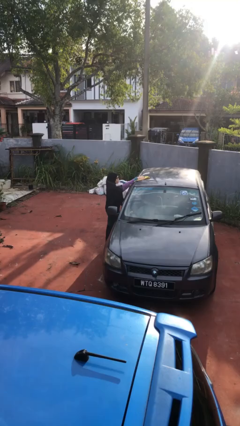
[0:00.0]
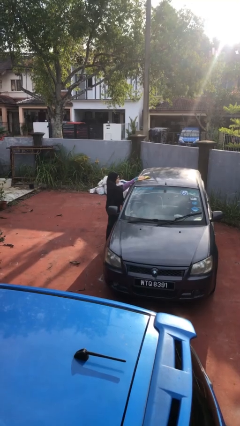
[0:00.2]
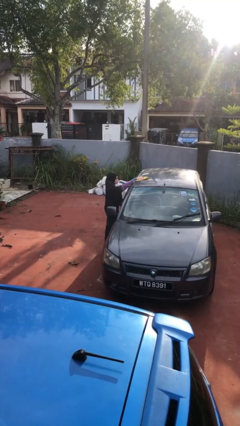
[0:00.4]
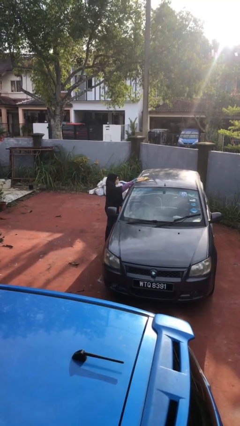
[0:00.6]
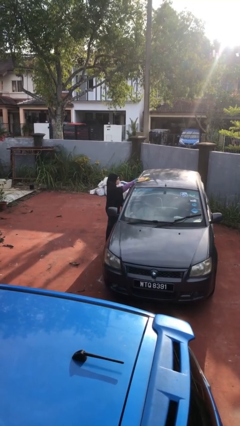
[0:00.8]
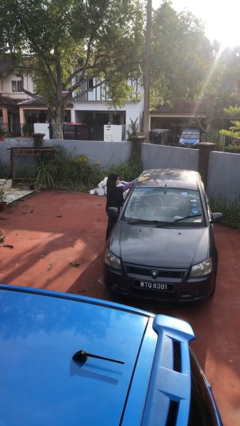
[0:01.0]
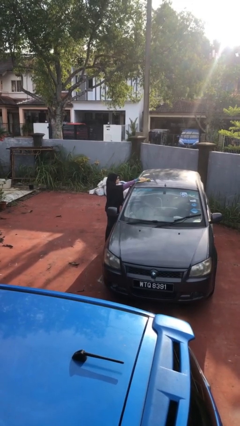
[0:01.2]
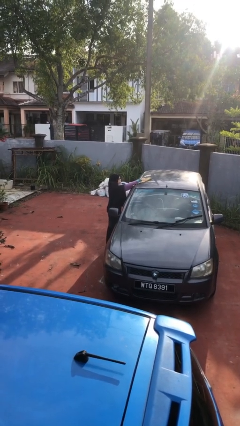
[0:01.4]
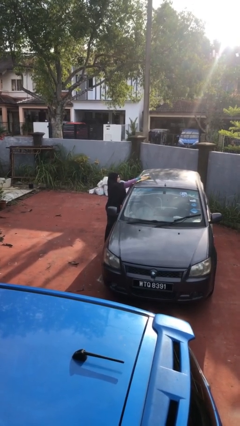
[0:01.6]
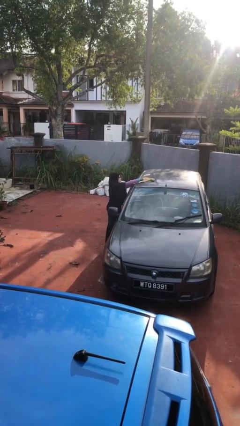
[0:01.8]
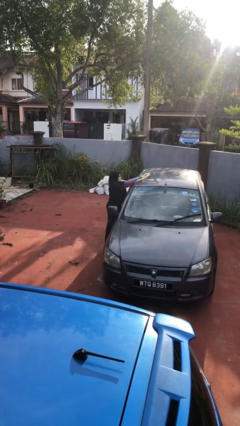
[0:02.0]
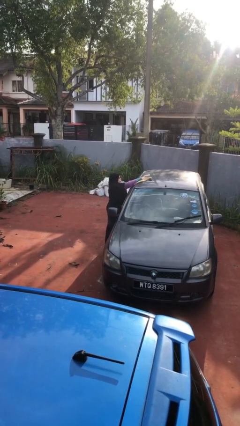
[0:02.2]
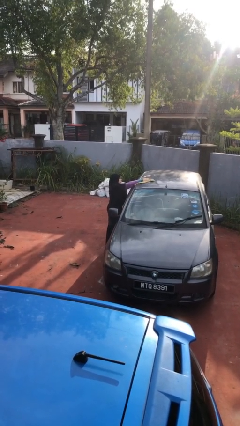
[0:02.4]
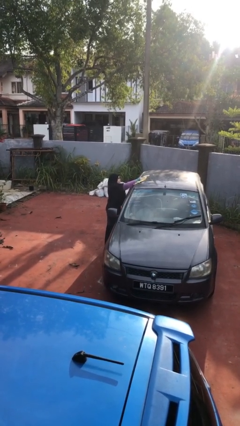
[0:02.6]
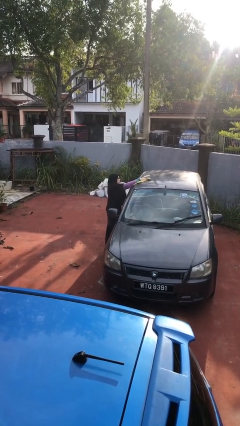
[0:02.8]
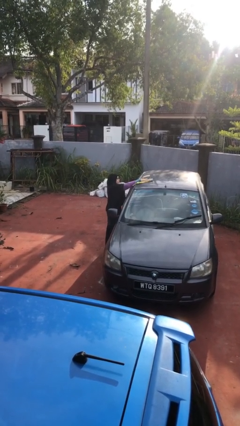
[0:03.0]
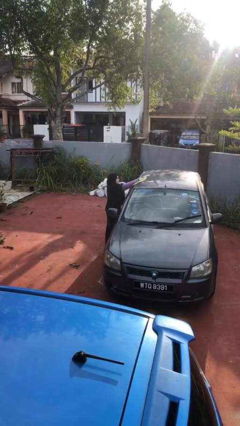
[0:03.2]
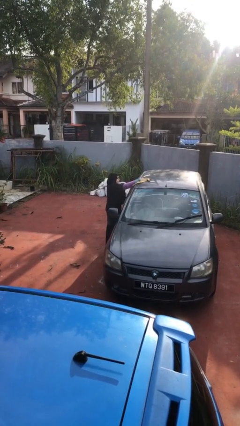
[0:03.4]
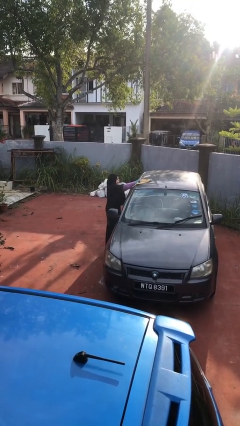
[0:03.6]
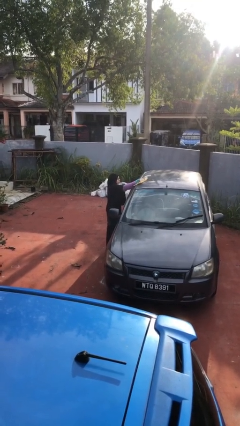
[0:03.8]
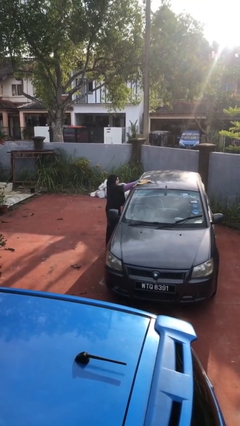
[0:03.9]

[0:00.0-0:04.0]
person polishes car with rag

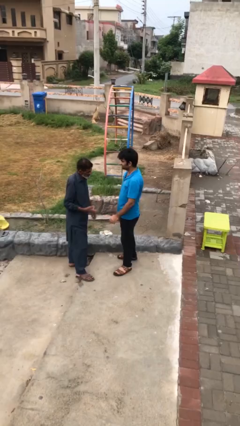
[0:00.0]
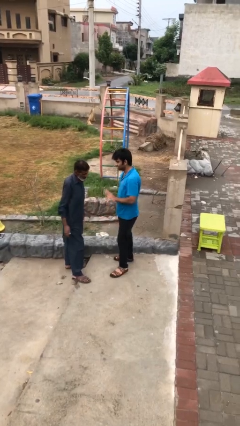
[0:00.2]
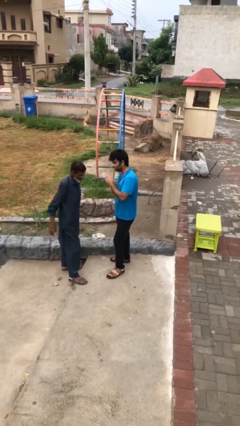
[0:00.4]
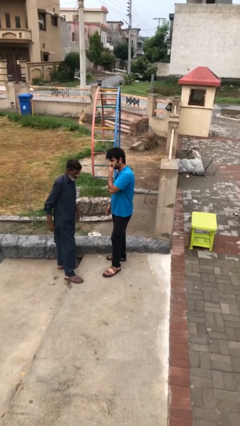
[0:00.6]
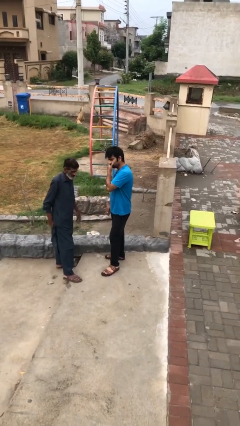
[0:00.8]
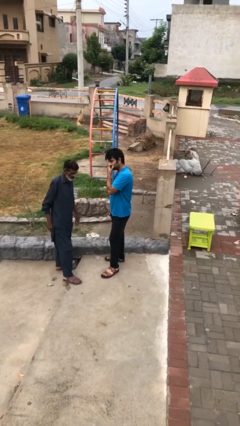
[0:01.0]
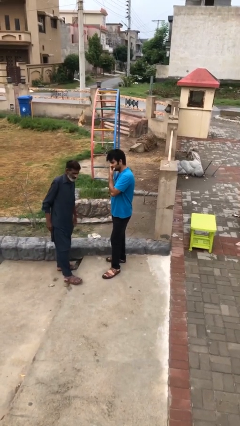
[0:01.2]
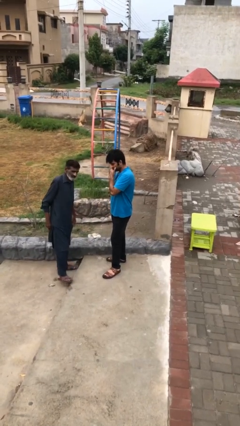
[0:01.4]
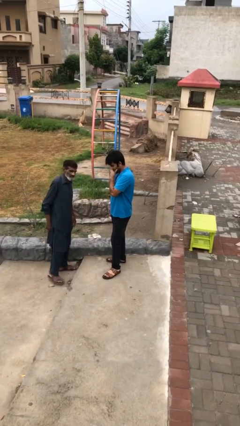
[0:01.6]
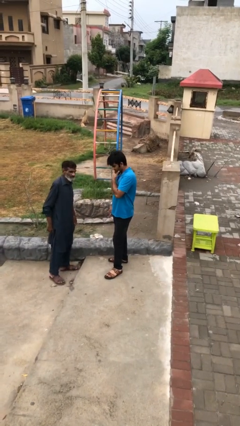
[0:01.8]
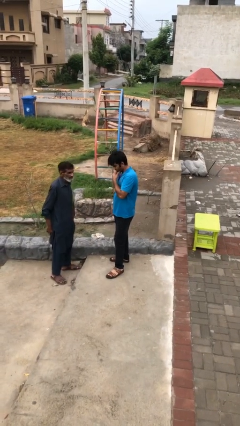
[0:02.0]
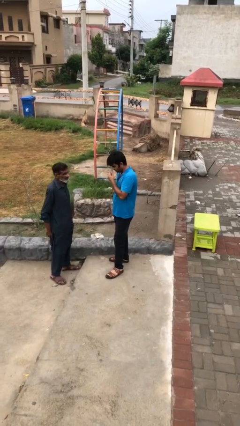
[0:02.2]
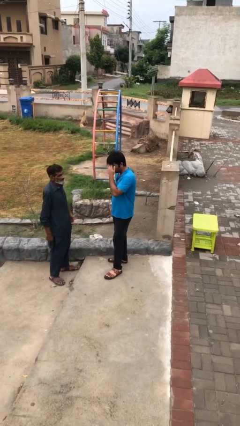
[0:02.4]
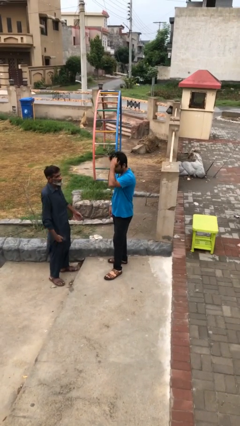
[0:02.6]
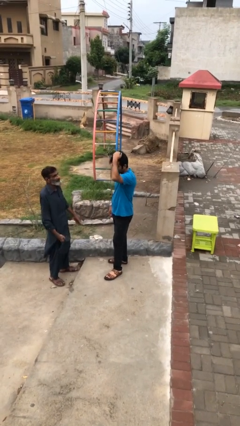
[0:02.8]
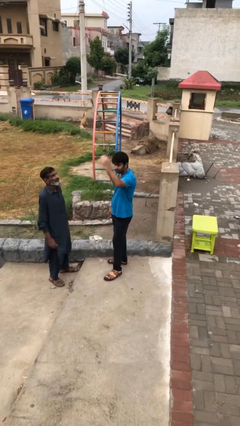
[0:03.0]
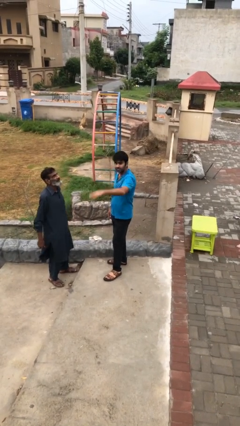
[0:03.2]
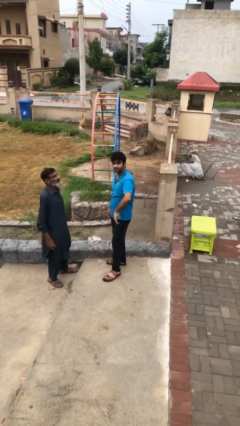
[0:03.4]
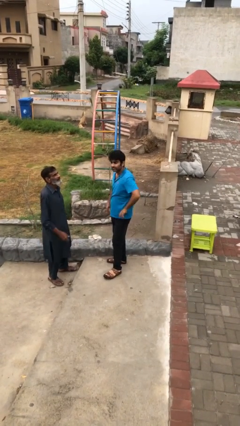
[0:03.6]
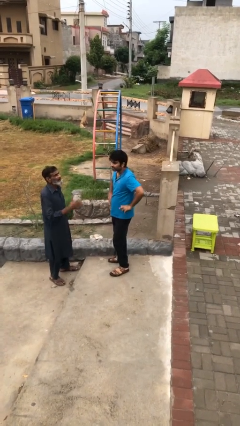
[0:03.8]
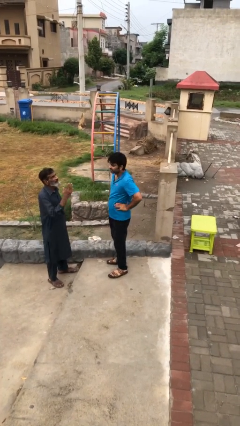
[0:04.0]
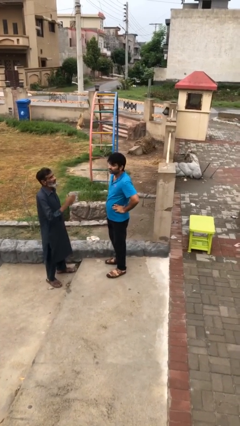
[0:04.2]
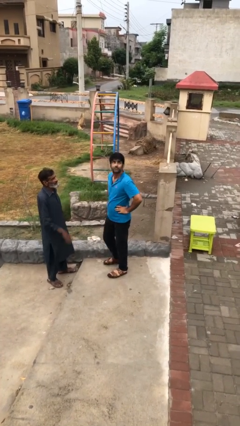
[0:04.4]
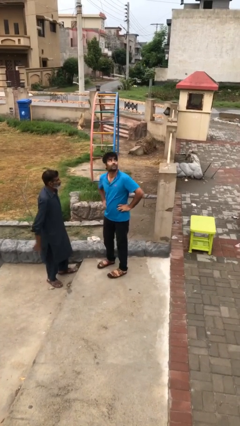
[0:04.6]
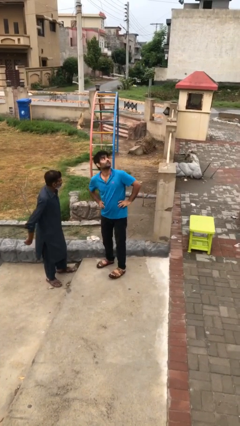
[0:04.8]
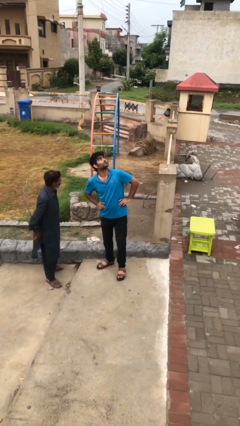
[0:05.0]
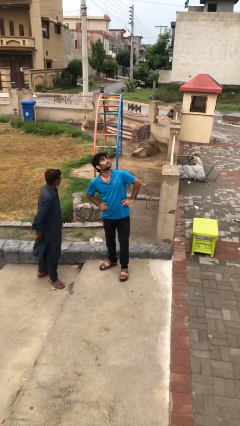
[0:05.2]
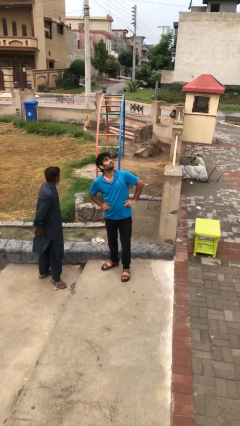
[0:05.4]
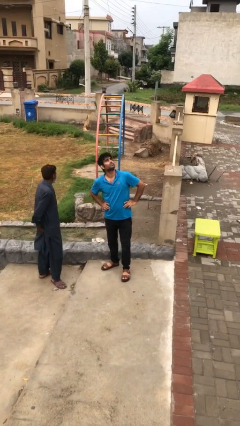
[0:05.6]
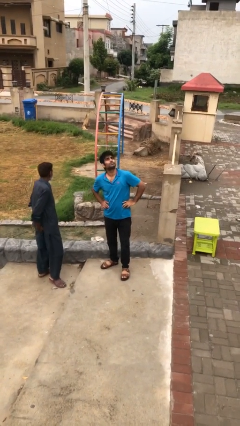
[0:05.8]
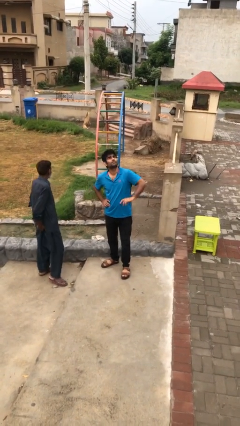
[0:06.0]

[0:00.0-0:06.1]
person talks to person

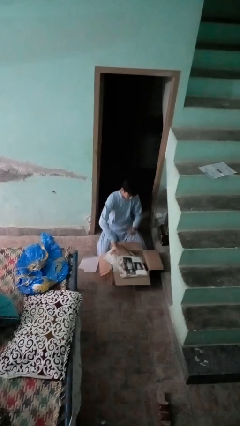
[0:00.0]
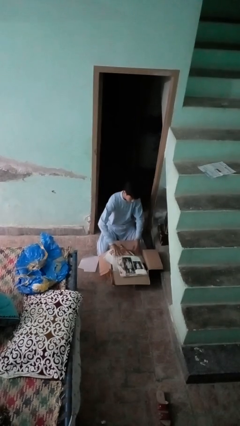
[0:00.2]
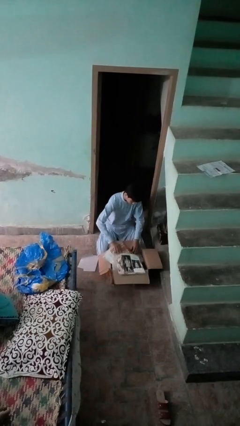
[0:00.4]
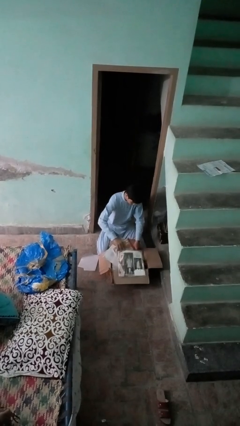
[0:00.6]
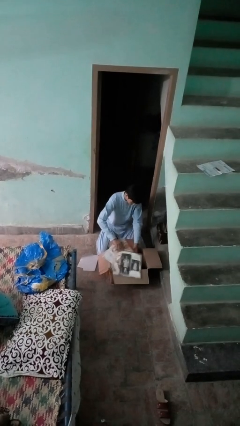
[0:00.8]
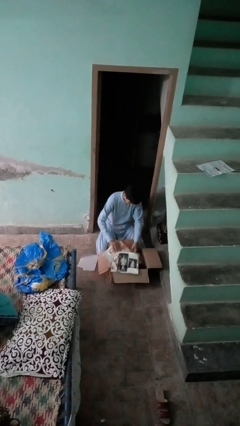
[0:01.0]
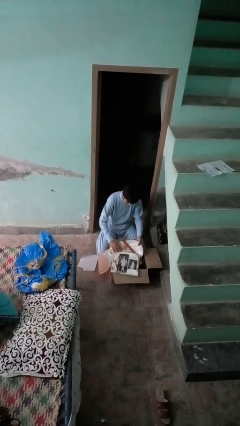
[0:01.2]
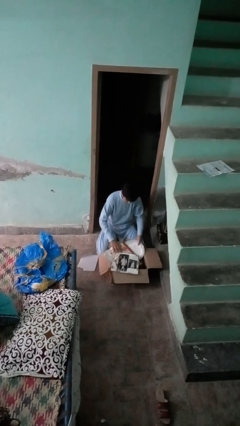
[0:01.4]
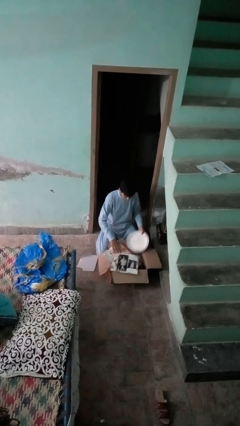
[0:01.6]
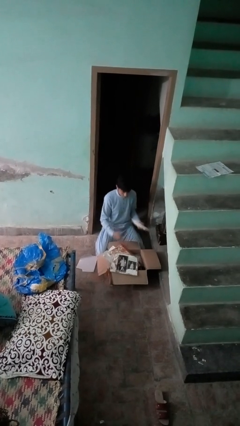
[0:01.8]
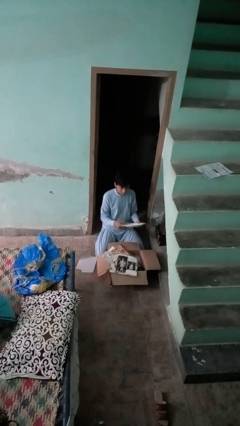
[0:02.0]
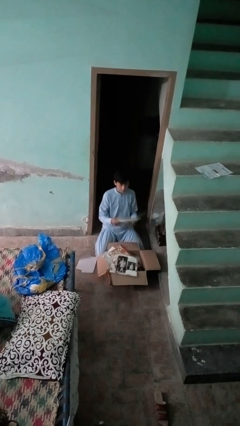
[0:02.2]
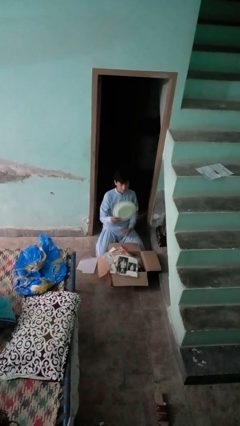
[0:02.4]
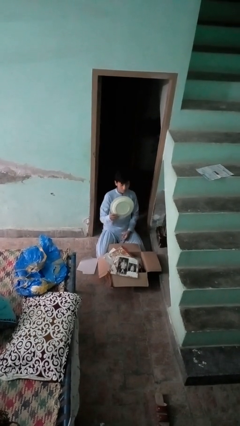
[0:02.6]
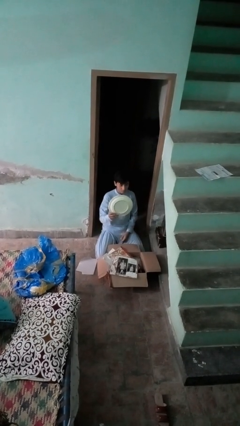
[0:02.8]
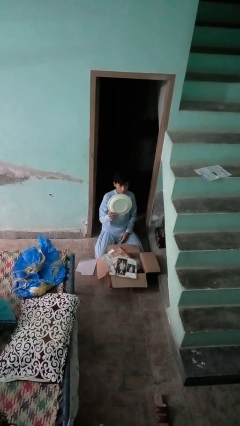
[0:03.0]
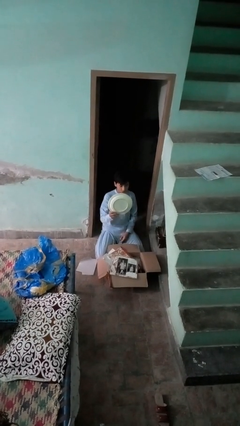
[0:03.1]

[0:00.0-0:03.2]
person takes object from box

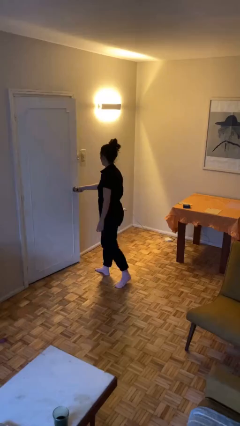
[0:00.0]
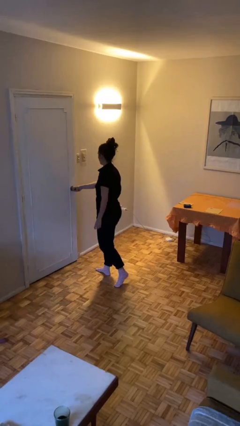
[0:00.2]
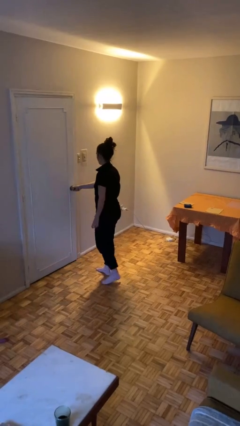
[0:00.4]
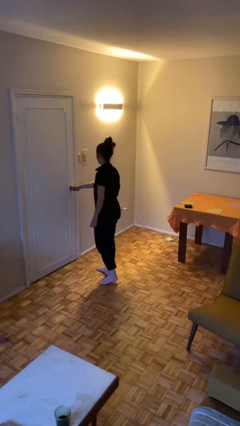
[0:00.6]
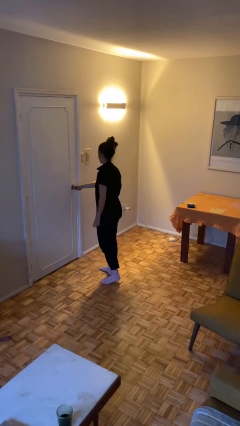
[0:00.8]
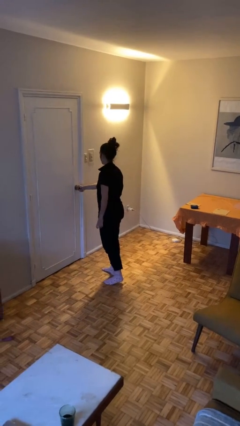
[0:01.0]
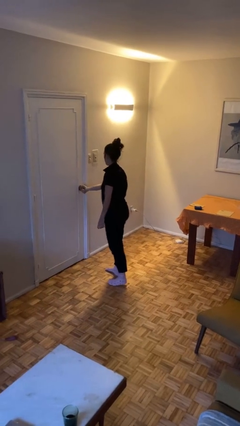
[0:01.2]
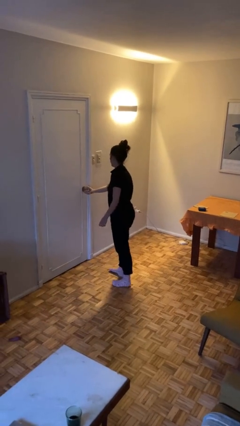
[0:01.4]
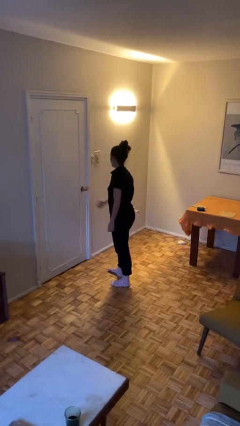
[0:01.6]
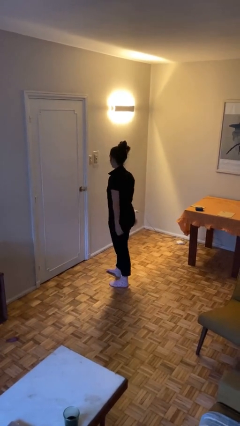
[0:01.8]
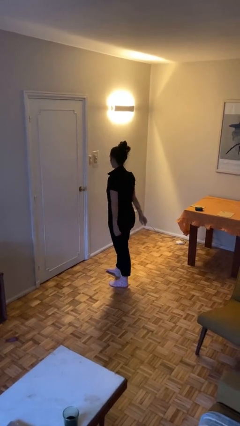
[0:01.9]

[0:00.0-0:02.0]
person closes facility door

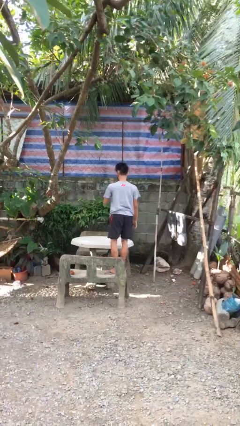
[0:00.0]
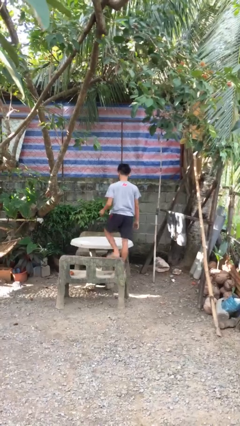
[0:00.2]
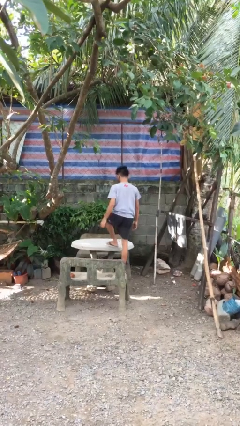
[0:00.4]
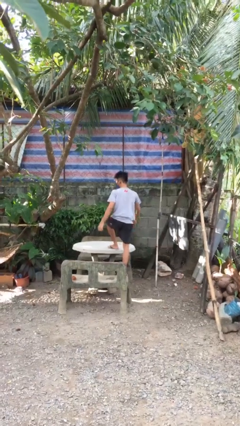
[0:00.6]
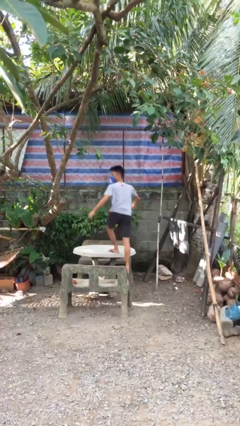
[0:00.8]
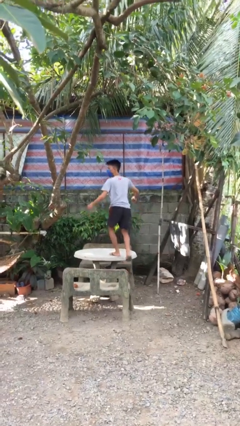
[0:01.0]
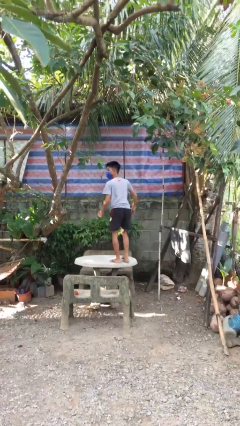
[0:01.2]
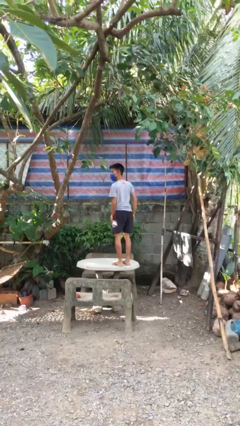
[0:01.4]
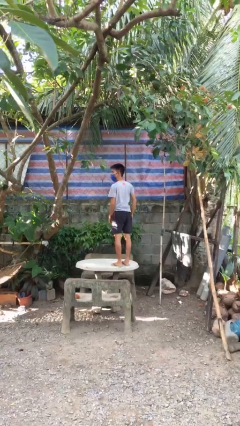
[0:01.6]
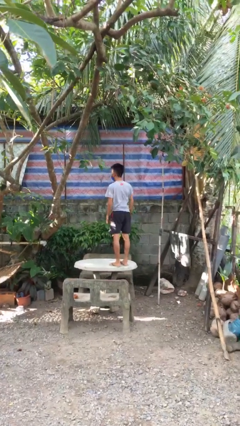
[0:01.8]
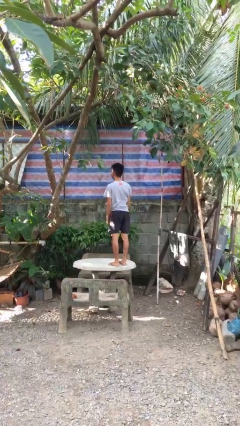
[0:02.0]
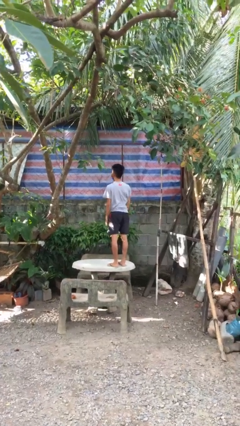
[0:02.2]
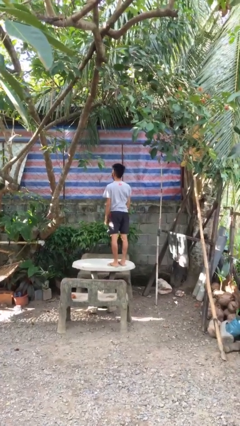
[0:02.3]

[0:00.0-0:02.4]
person climbs on table
